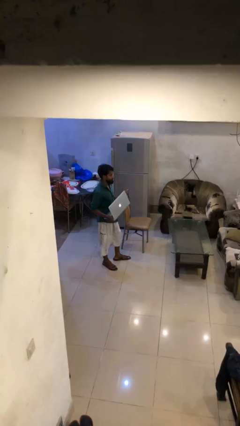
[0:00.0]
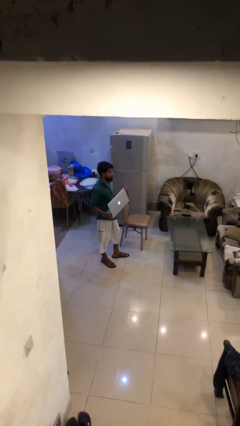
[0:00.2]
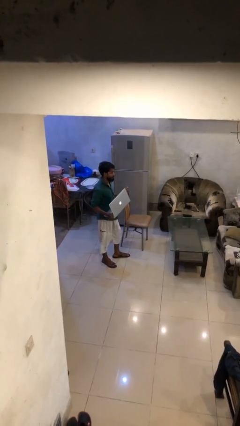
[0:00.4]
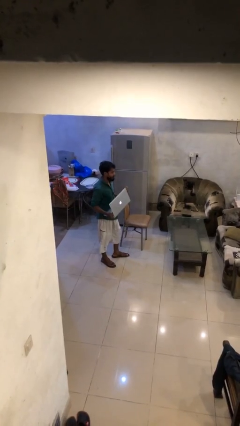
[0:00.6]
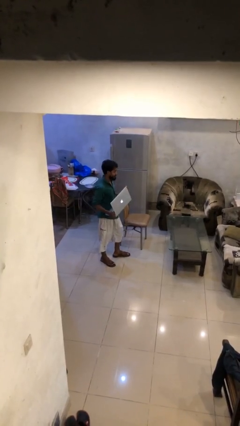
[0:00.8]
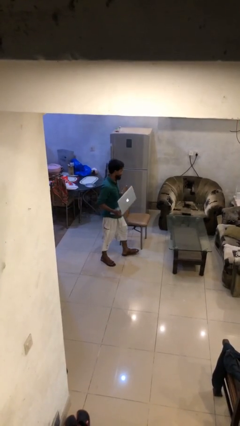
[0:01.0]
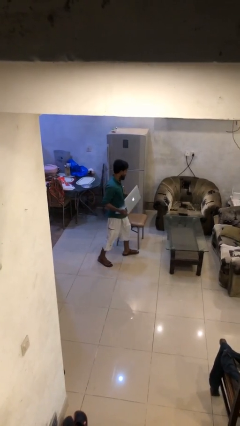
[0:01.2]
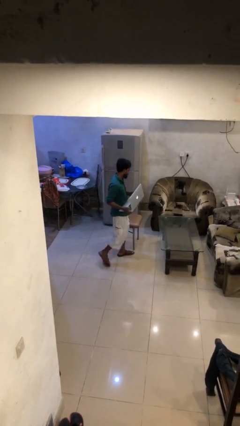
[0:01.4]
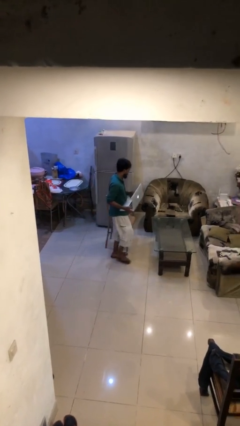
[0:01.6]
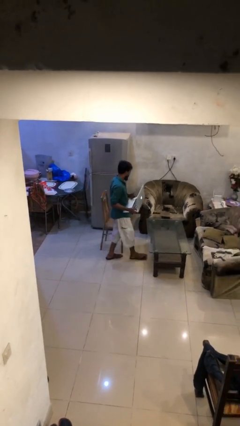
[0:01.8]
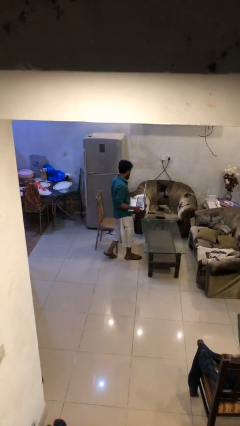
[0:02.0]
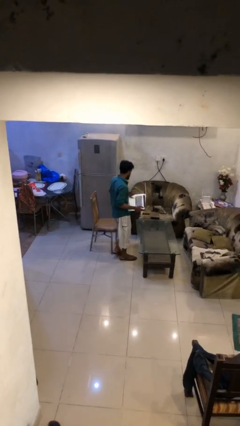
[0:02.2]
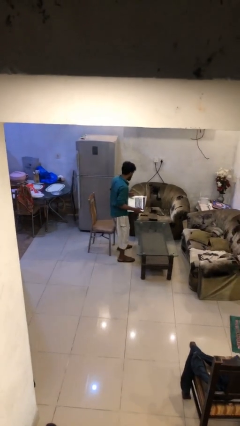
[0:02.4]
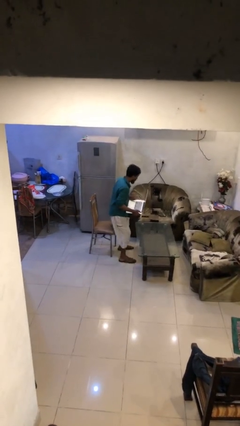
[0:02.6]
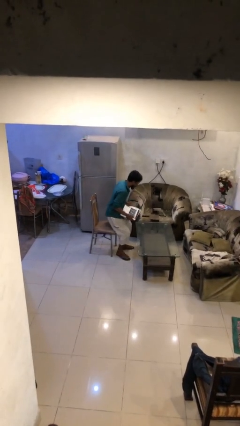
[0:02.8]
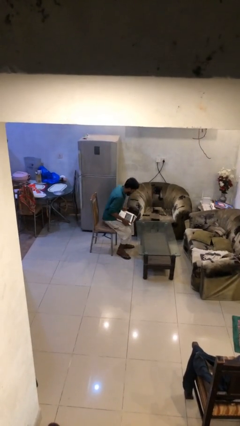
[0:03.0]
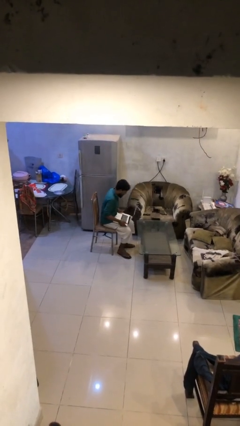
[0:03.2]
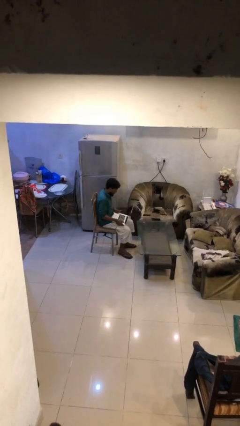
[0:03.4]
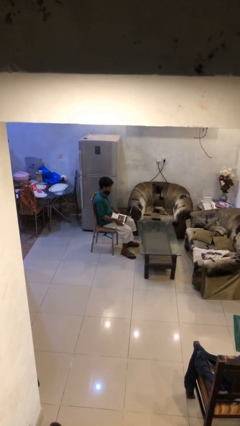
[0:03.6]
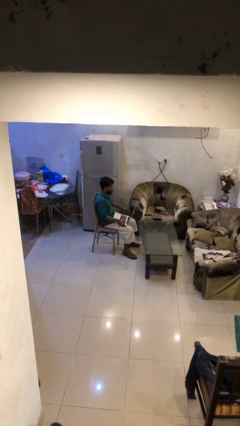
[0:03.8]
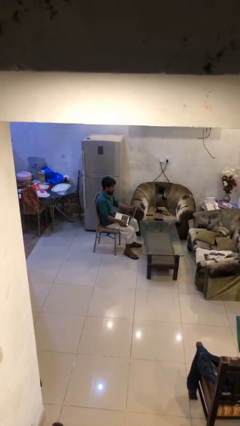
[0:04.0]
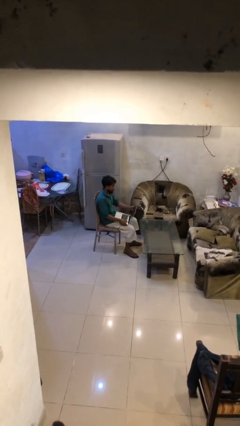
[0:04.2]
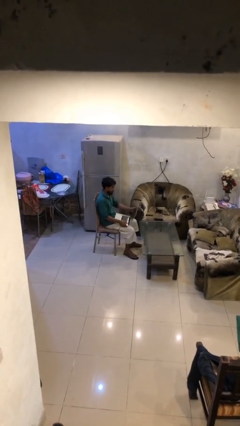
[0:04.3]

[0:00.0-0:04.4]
person sits down

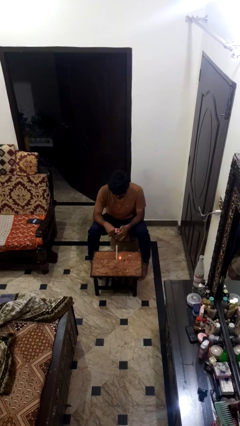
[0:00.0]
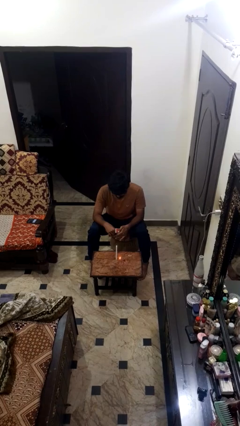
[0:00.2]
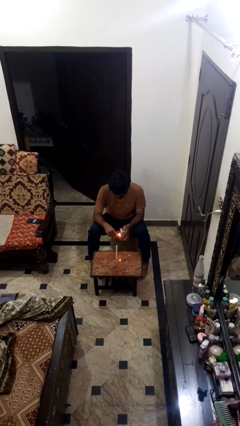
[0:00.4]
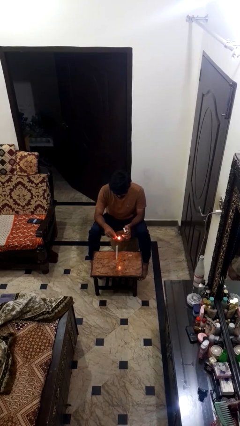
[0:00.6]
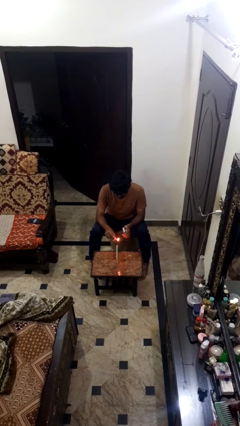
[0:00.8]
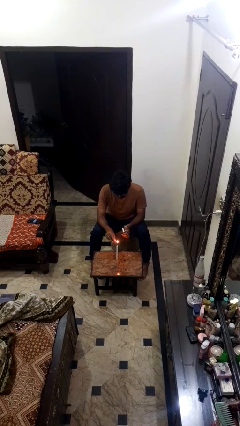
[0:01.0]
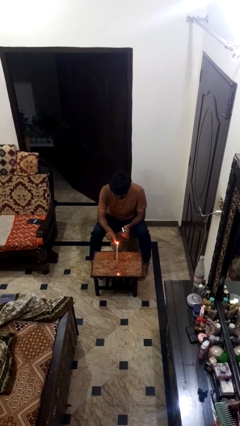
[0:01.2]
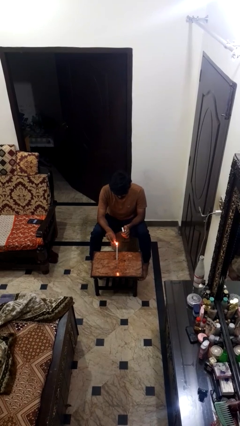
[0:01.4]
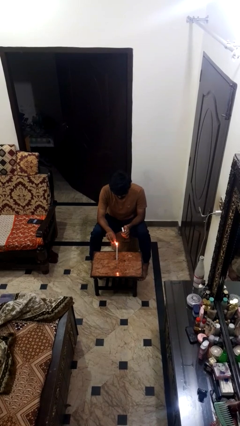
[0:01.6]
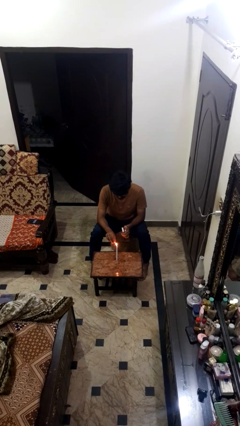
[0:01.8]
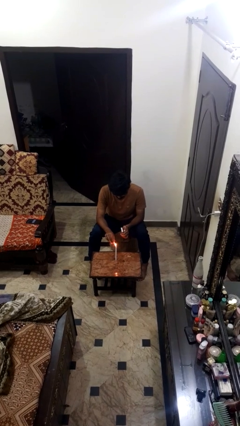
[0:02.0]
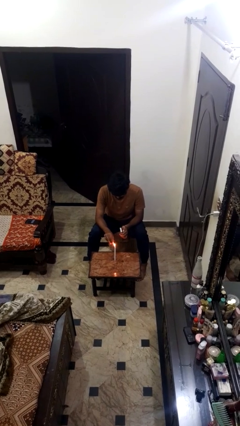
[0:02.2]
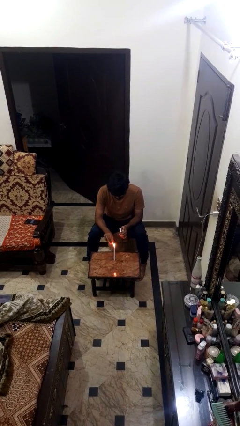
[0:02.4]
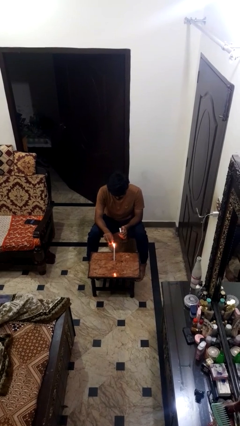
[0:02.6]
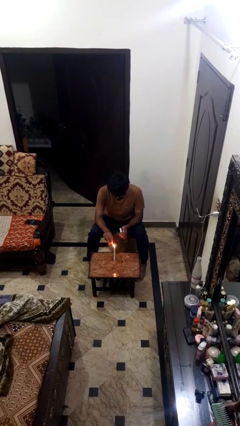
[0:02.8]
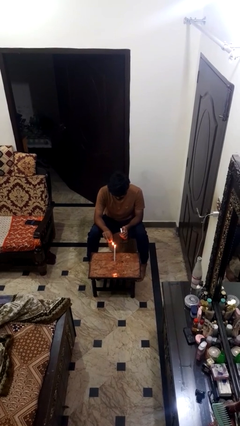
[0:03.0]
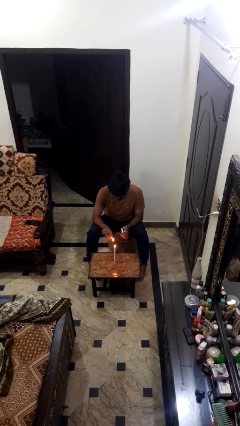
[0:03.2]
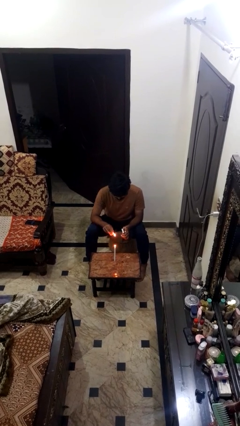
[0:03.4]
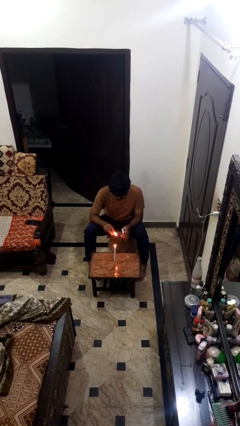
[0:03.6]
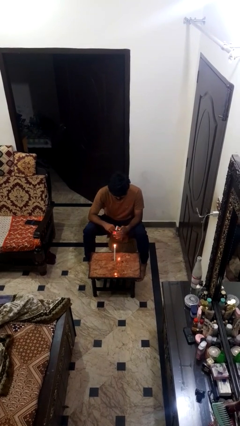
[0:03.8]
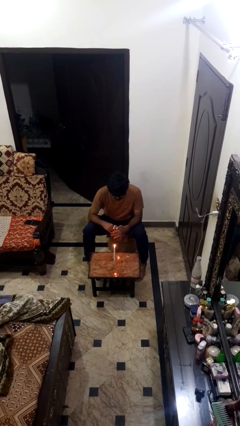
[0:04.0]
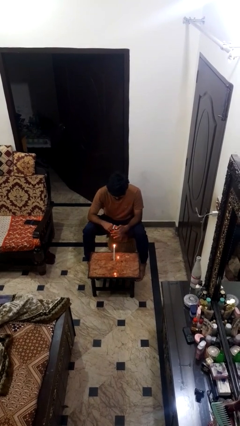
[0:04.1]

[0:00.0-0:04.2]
person lights candle

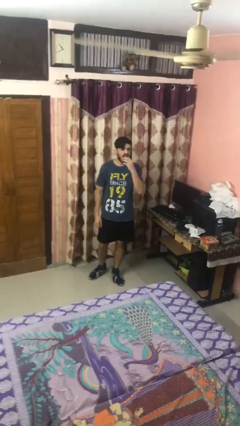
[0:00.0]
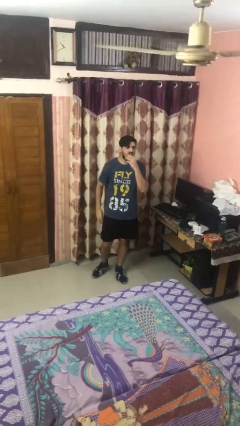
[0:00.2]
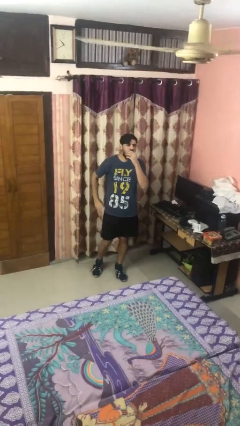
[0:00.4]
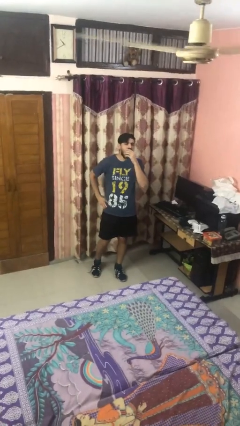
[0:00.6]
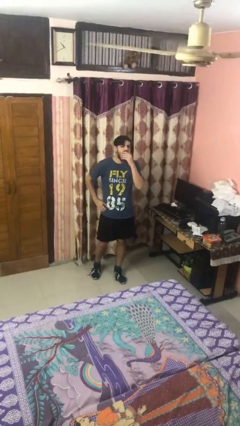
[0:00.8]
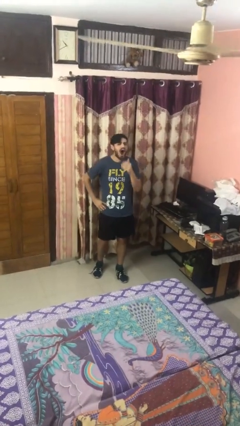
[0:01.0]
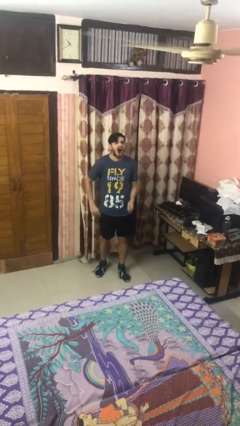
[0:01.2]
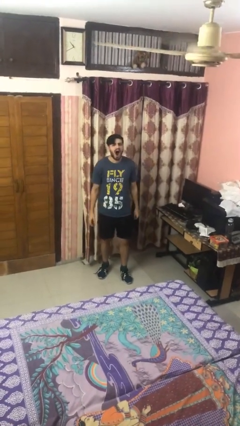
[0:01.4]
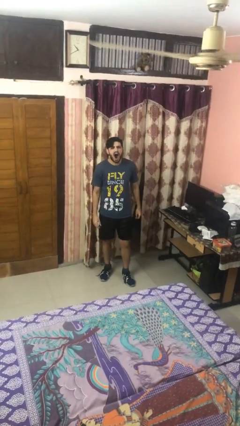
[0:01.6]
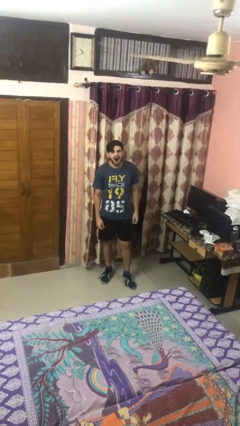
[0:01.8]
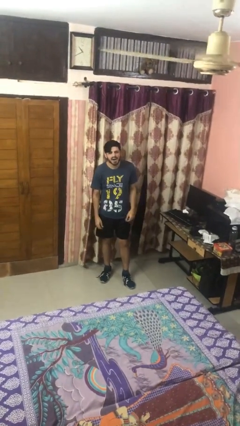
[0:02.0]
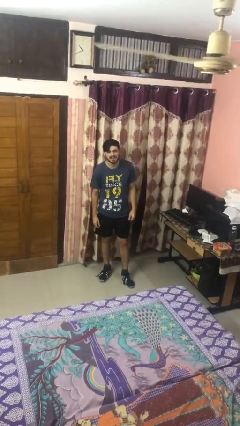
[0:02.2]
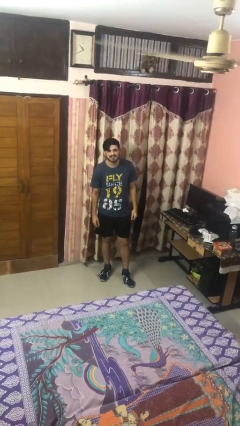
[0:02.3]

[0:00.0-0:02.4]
person yawns

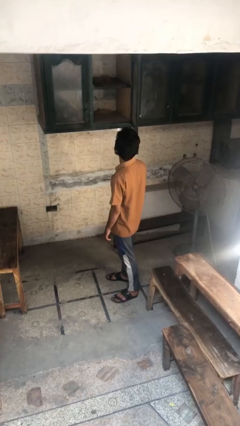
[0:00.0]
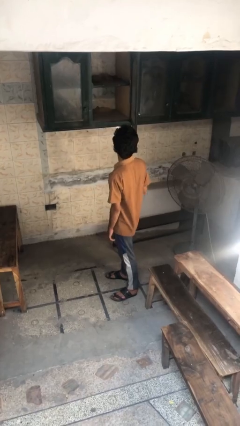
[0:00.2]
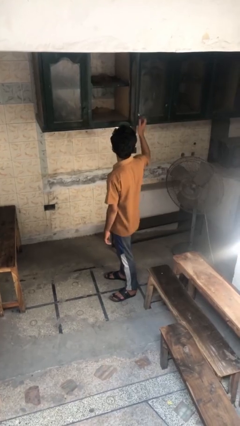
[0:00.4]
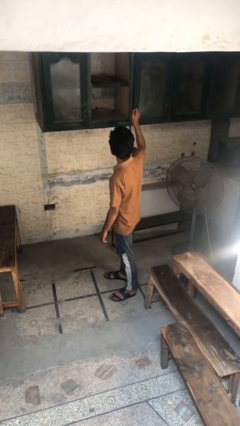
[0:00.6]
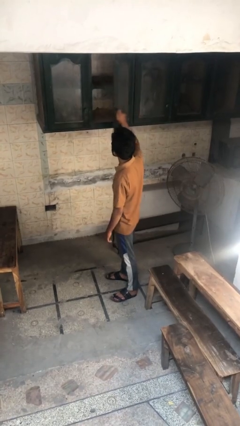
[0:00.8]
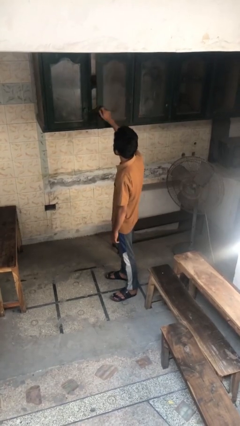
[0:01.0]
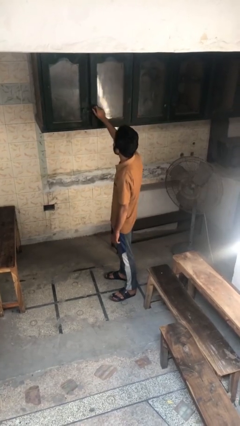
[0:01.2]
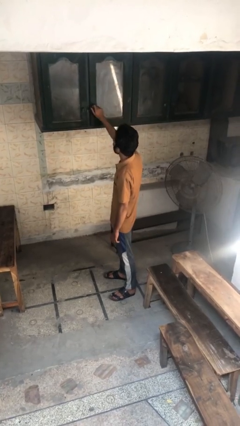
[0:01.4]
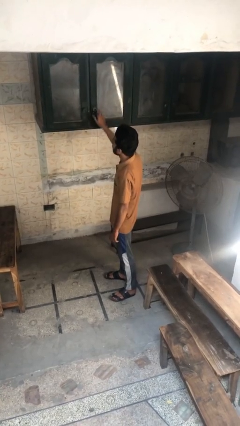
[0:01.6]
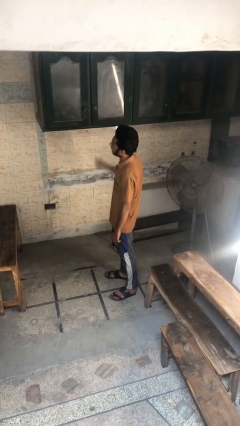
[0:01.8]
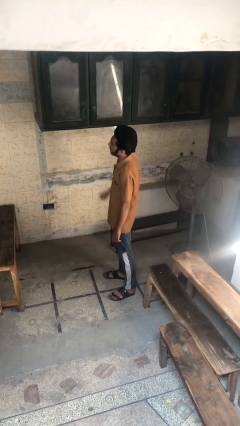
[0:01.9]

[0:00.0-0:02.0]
person closes cabinet

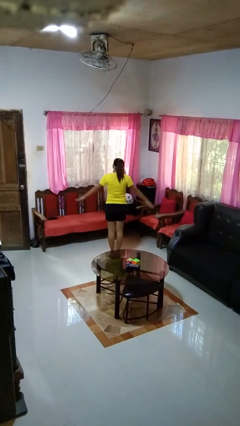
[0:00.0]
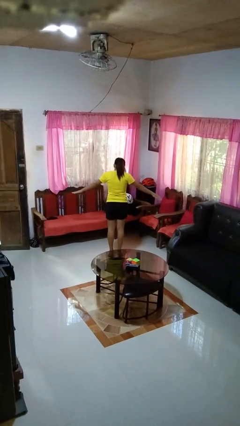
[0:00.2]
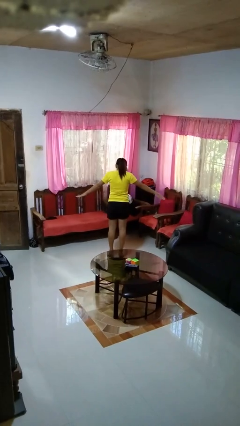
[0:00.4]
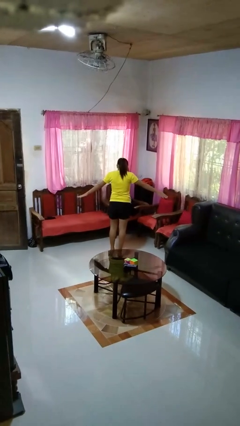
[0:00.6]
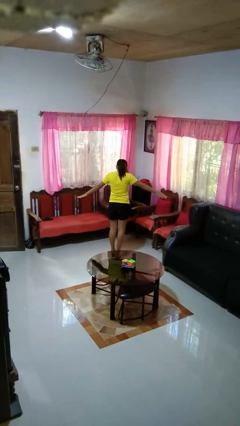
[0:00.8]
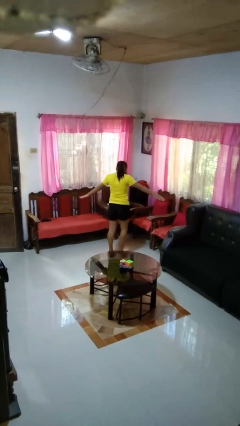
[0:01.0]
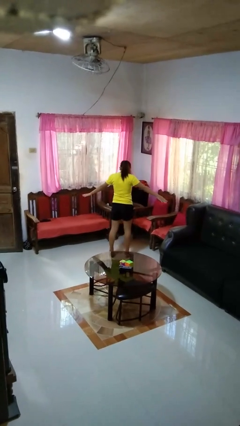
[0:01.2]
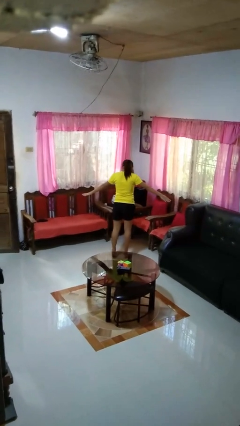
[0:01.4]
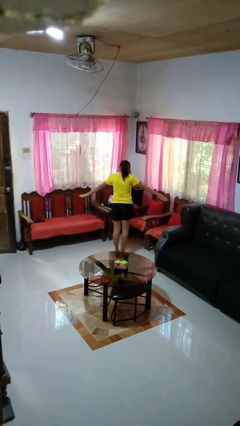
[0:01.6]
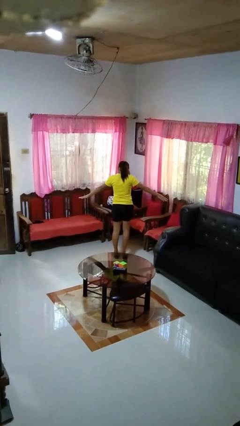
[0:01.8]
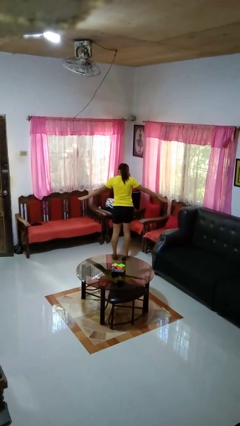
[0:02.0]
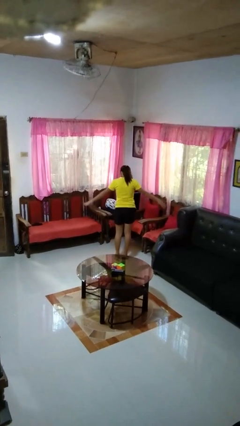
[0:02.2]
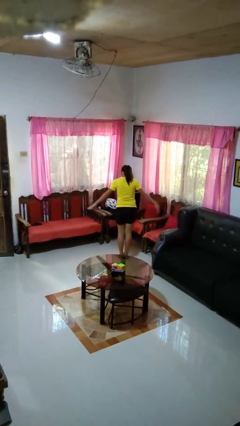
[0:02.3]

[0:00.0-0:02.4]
person walks tiptoe

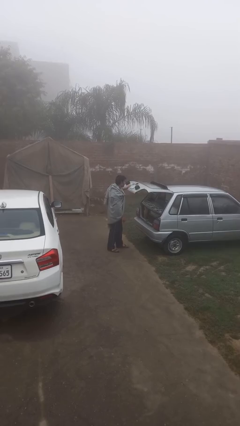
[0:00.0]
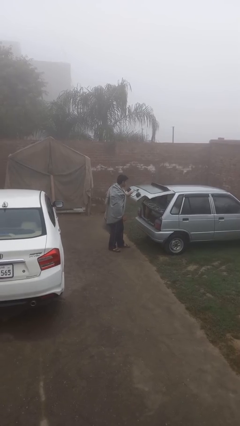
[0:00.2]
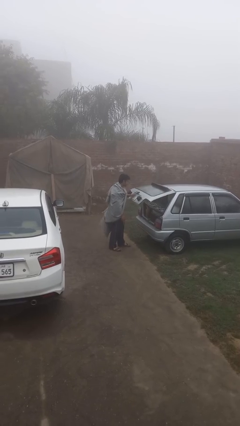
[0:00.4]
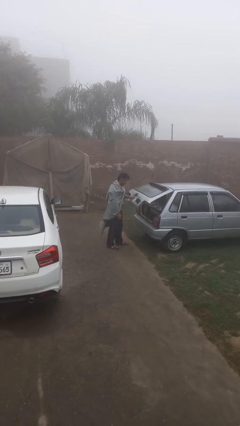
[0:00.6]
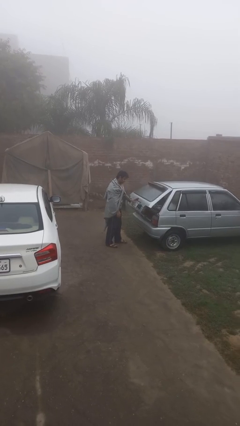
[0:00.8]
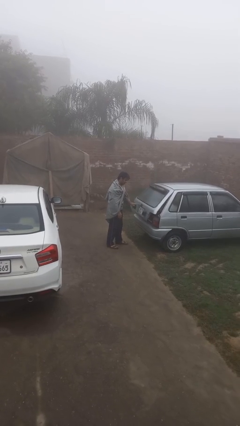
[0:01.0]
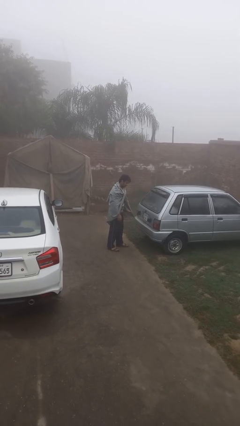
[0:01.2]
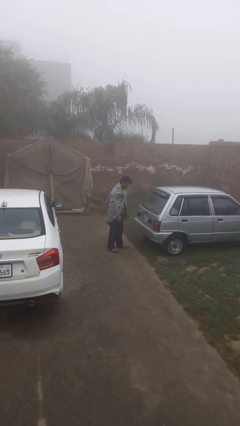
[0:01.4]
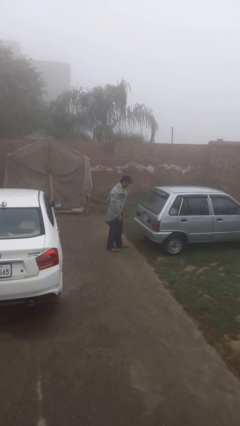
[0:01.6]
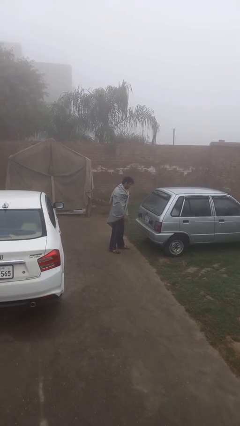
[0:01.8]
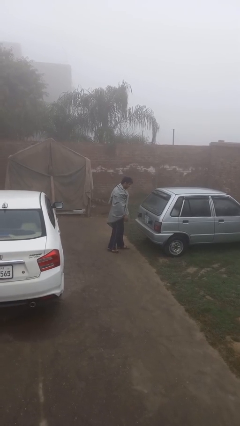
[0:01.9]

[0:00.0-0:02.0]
person closes car trunk

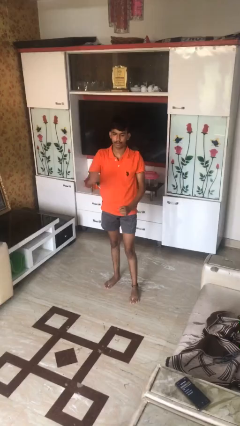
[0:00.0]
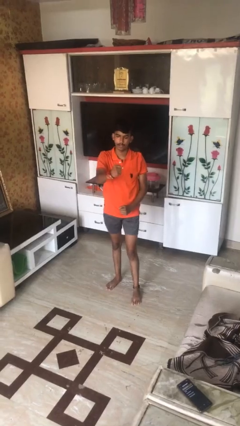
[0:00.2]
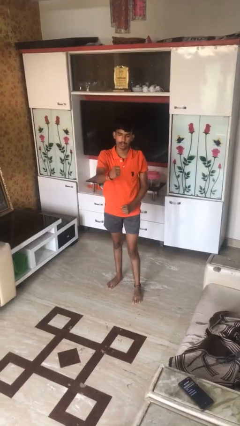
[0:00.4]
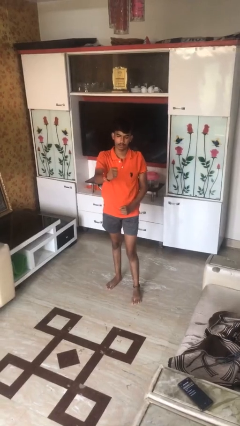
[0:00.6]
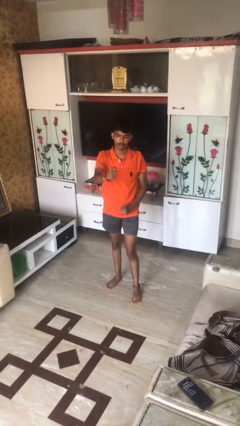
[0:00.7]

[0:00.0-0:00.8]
person punches
